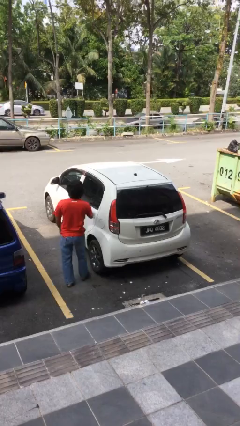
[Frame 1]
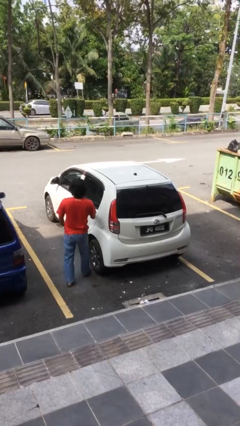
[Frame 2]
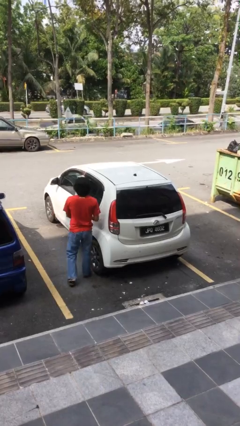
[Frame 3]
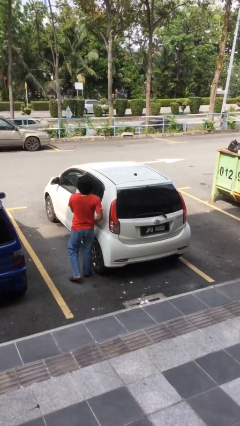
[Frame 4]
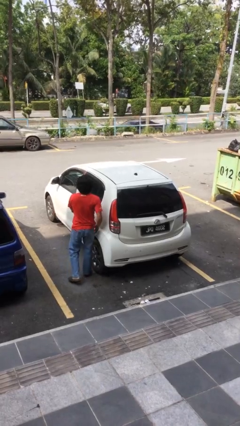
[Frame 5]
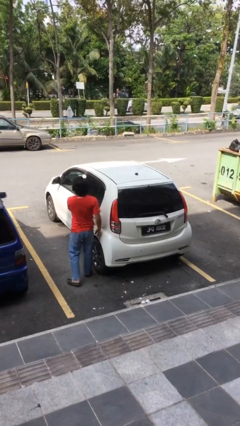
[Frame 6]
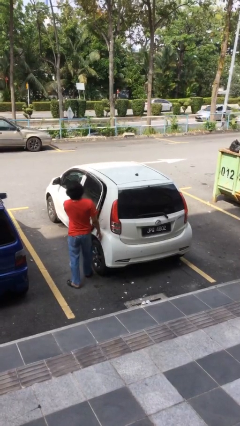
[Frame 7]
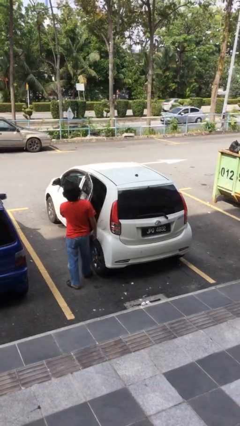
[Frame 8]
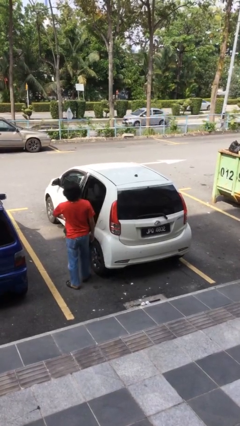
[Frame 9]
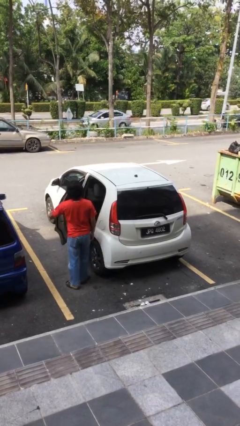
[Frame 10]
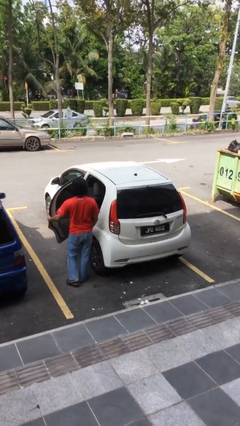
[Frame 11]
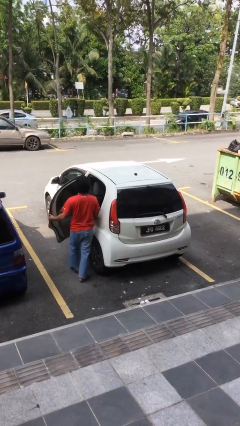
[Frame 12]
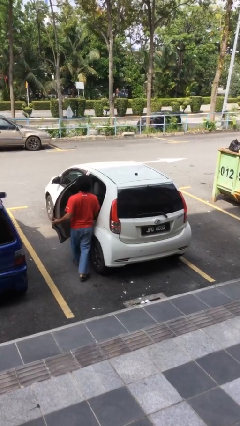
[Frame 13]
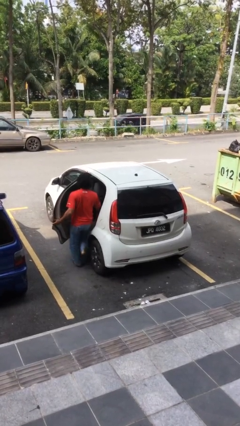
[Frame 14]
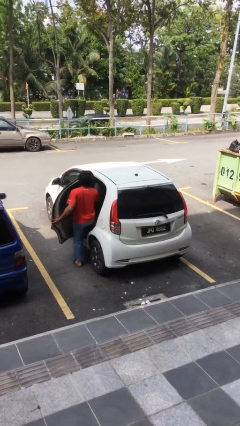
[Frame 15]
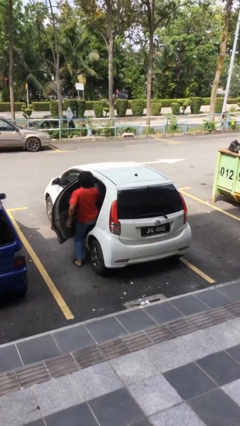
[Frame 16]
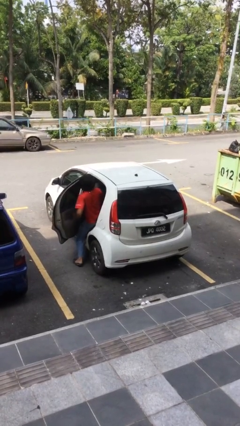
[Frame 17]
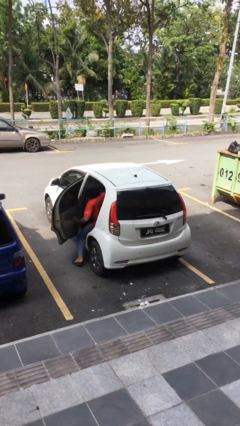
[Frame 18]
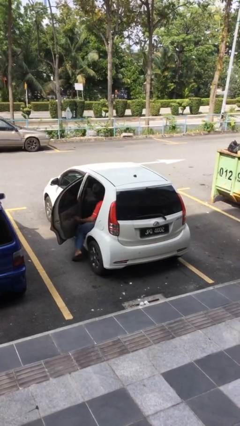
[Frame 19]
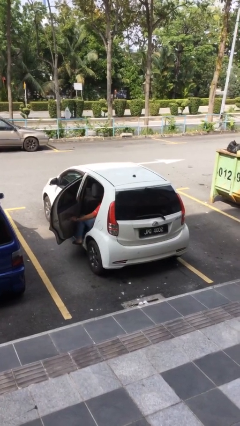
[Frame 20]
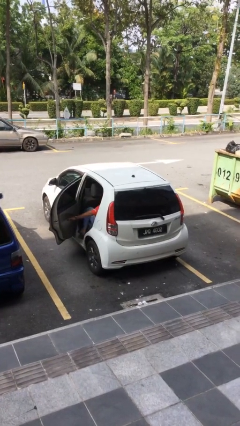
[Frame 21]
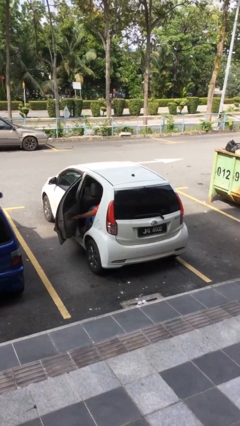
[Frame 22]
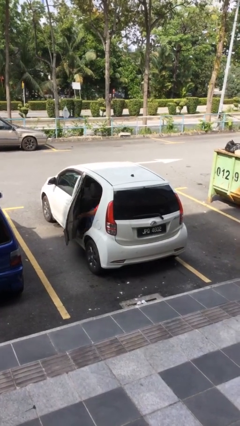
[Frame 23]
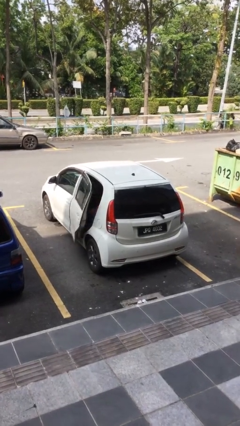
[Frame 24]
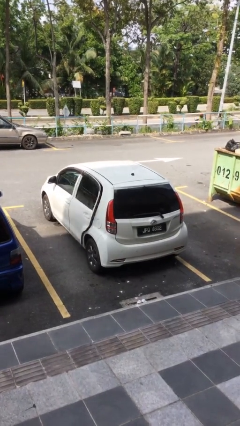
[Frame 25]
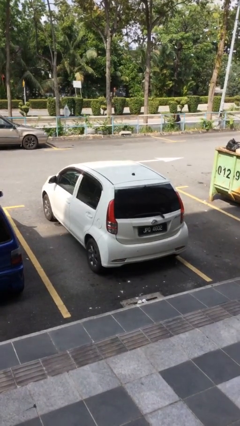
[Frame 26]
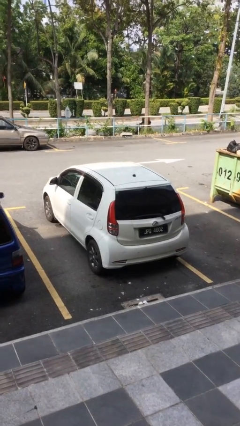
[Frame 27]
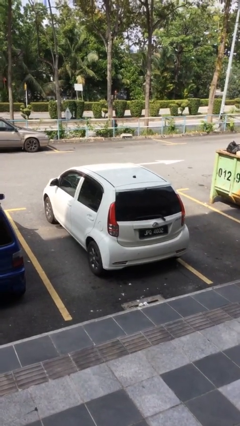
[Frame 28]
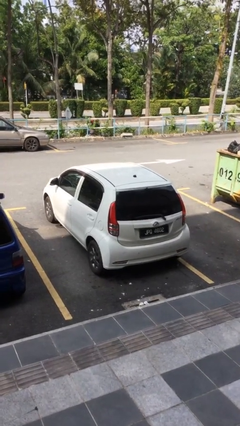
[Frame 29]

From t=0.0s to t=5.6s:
car picks up person

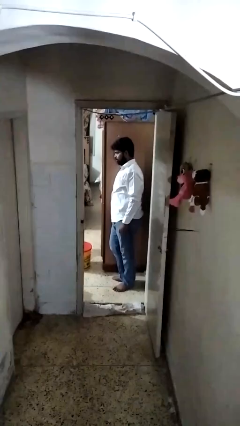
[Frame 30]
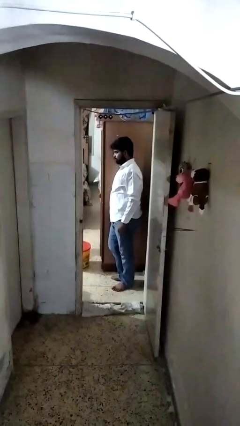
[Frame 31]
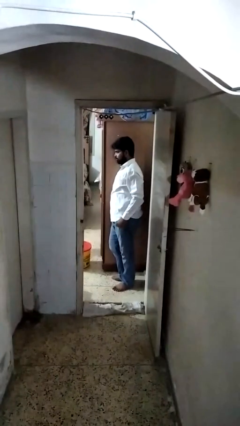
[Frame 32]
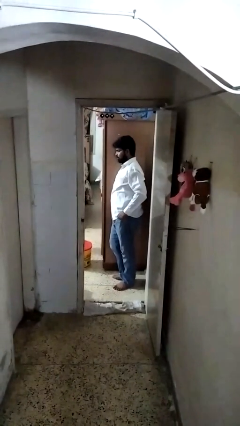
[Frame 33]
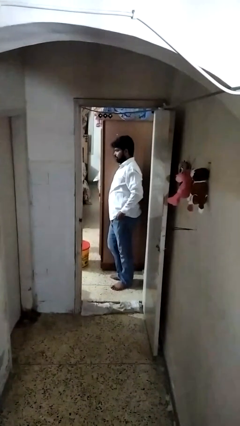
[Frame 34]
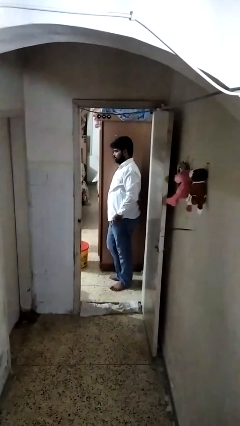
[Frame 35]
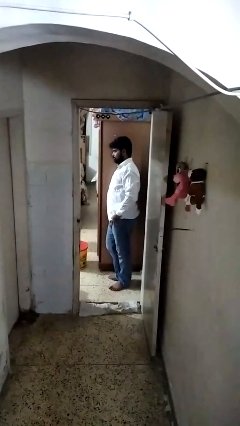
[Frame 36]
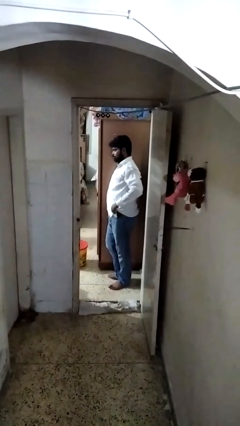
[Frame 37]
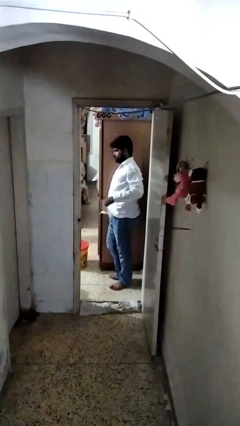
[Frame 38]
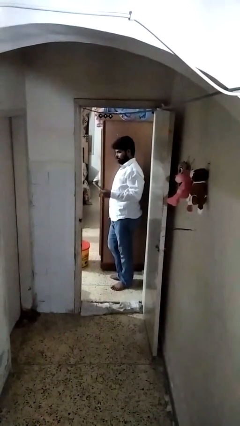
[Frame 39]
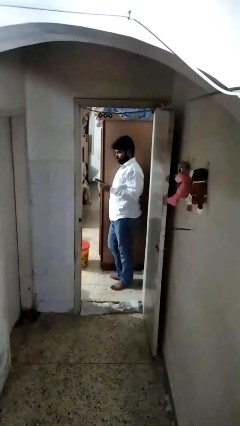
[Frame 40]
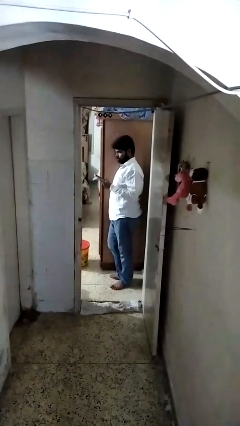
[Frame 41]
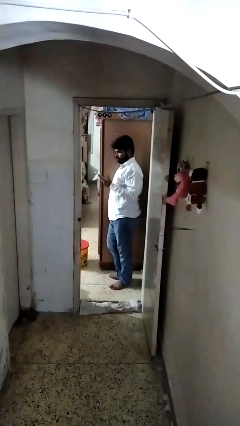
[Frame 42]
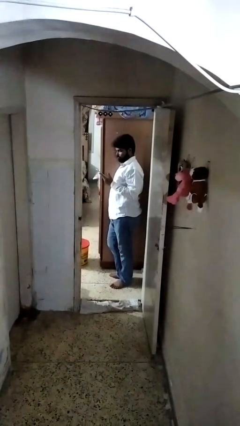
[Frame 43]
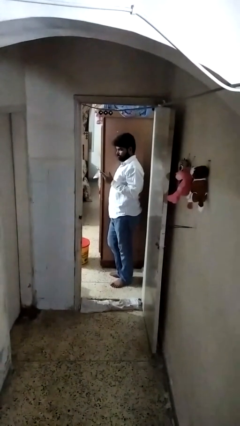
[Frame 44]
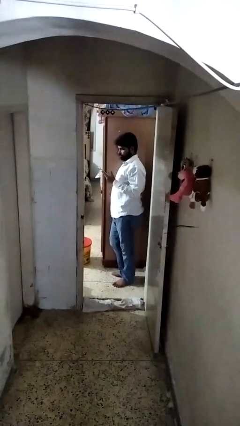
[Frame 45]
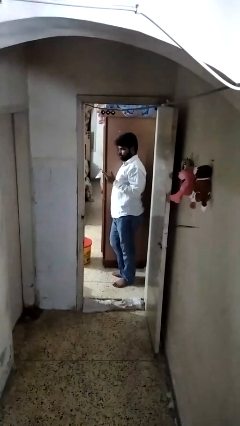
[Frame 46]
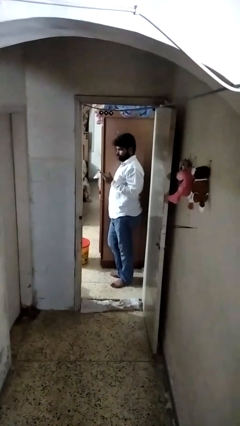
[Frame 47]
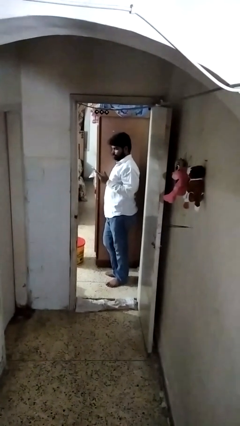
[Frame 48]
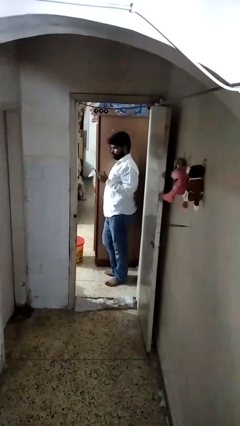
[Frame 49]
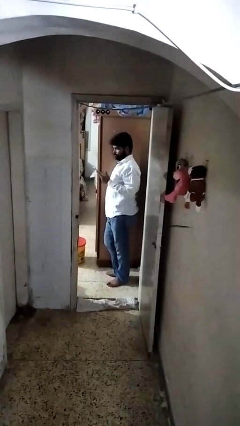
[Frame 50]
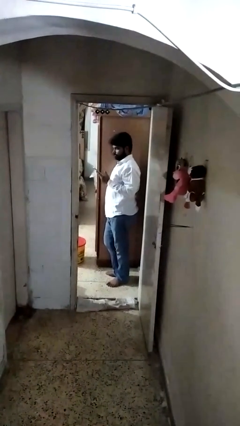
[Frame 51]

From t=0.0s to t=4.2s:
person takes phone from pocket

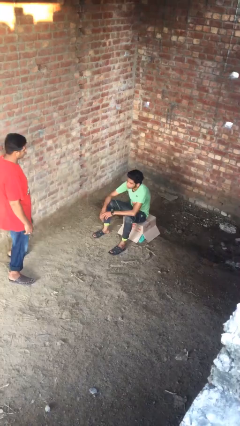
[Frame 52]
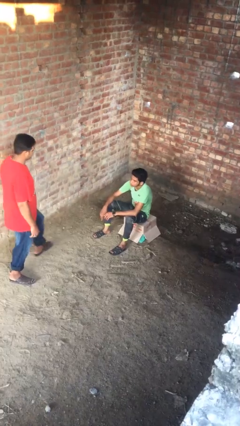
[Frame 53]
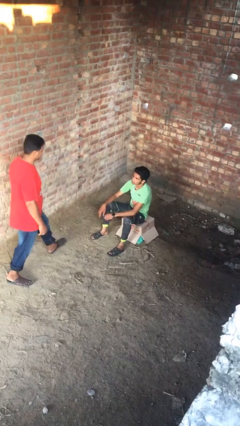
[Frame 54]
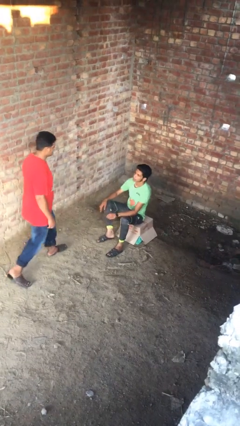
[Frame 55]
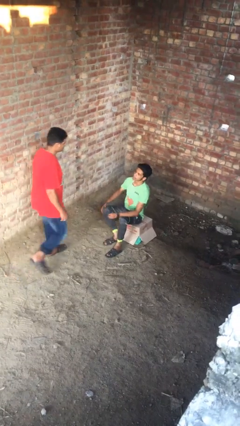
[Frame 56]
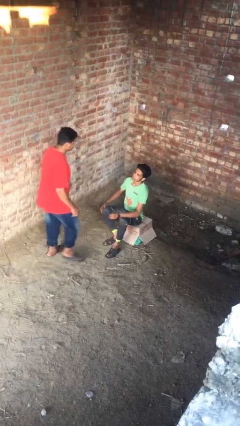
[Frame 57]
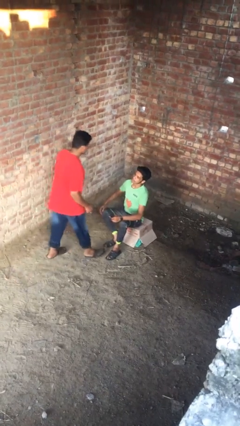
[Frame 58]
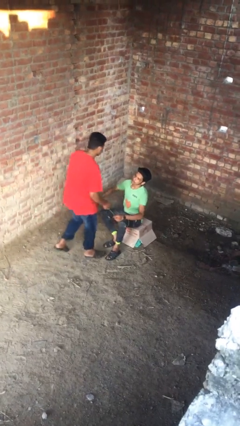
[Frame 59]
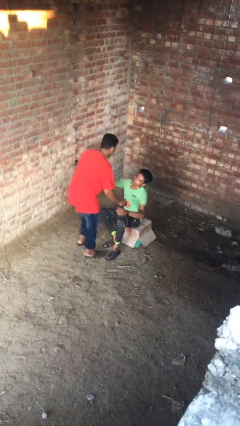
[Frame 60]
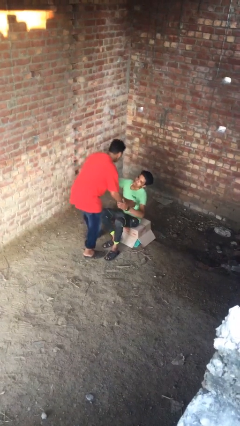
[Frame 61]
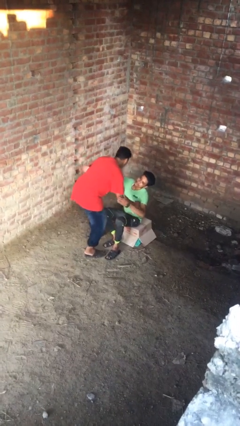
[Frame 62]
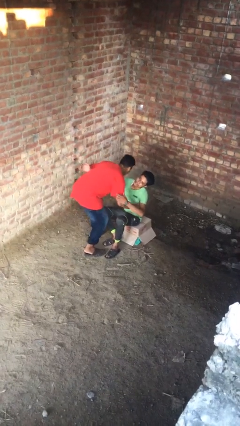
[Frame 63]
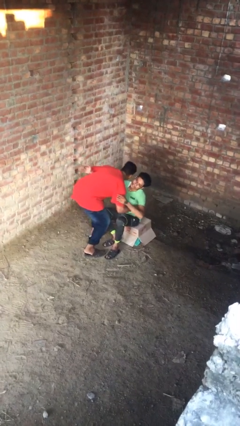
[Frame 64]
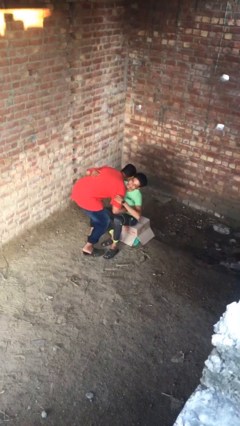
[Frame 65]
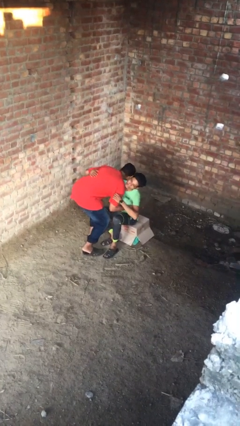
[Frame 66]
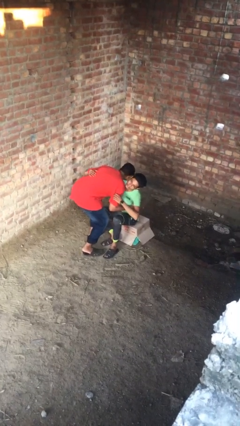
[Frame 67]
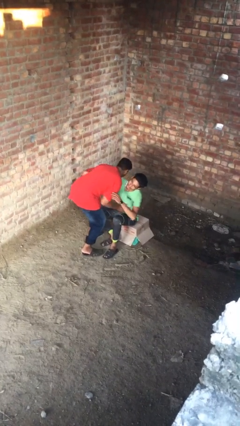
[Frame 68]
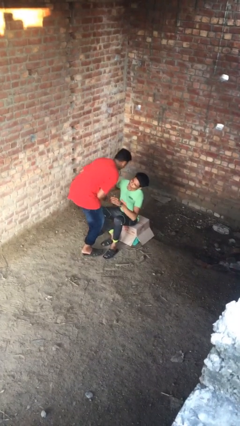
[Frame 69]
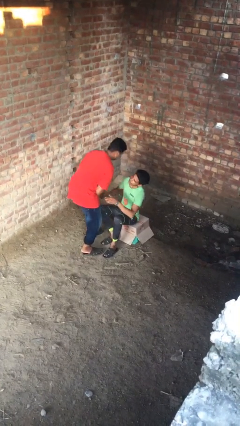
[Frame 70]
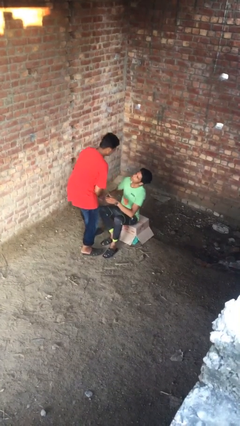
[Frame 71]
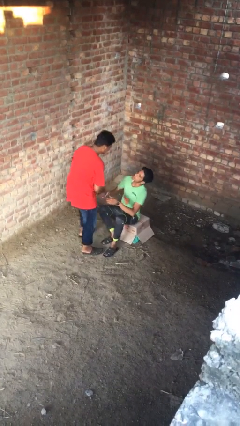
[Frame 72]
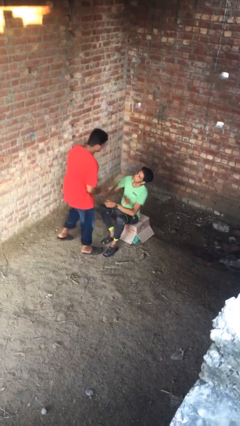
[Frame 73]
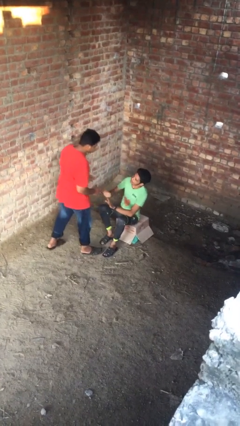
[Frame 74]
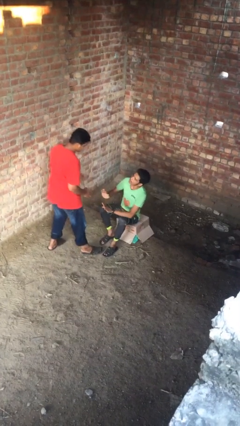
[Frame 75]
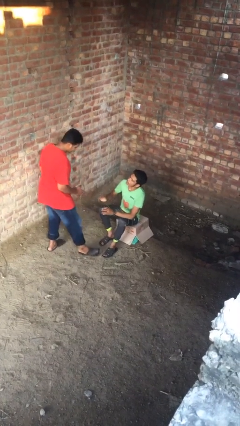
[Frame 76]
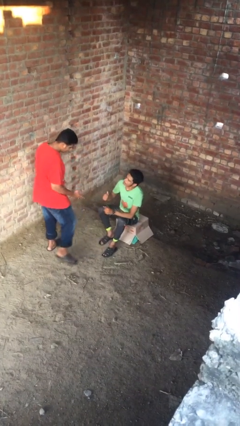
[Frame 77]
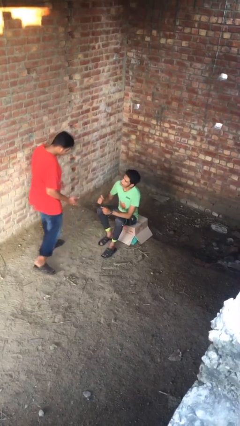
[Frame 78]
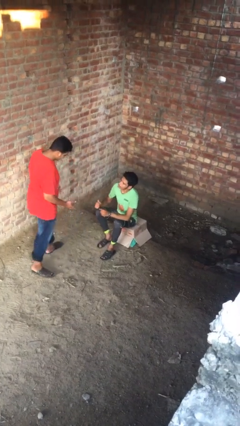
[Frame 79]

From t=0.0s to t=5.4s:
person embraces person

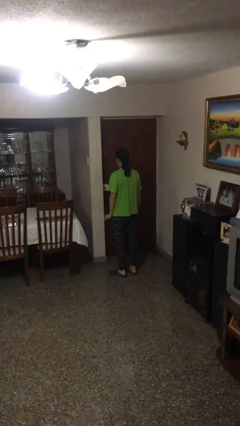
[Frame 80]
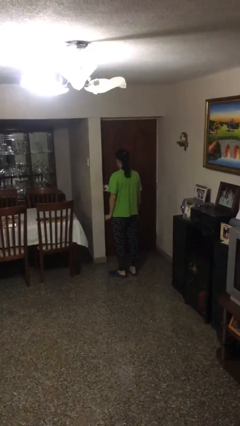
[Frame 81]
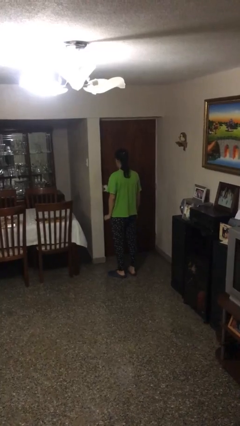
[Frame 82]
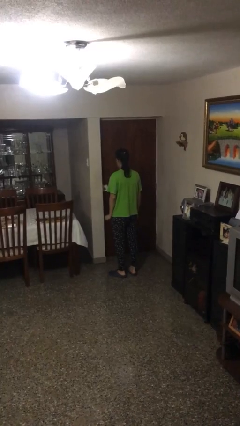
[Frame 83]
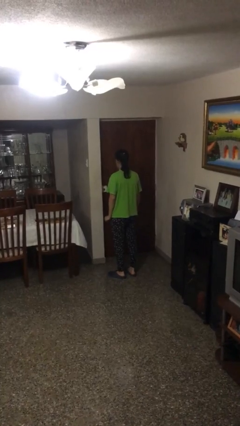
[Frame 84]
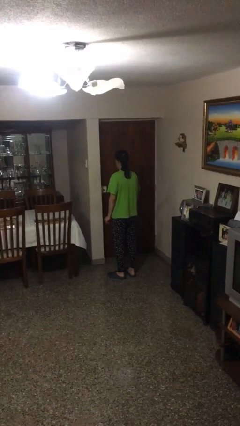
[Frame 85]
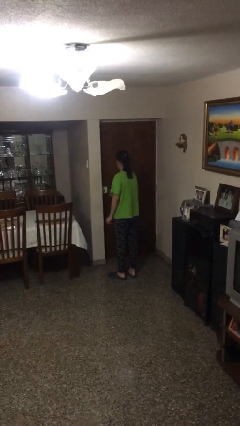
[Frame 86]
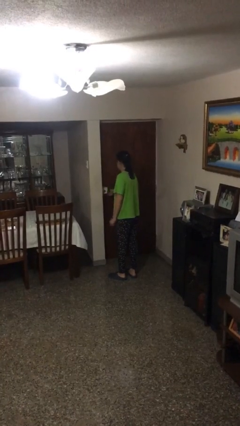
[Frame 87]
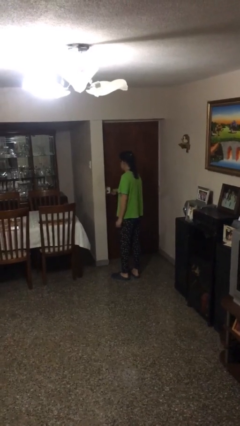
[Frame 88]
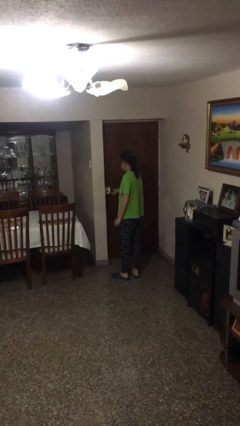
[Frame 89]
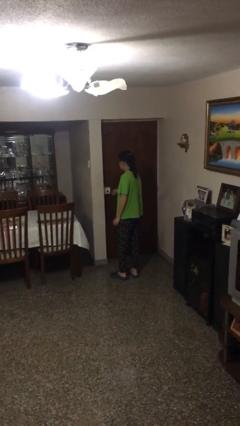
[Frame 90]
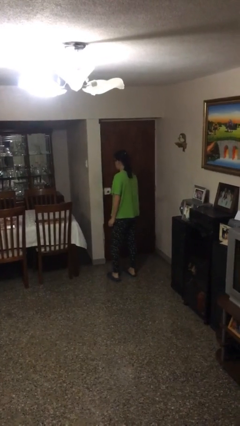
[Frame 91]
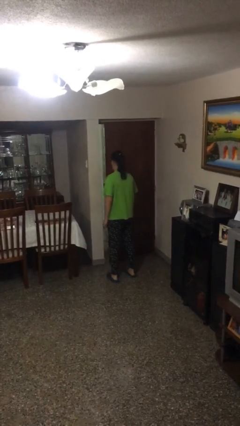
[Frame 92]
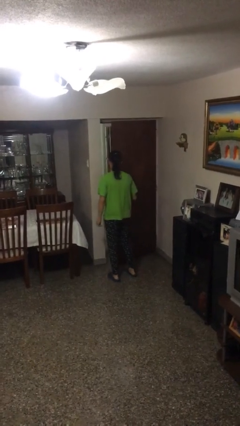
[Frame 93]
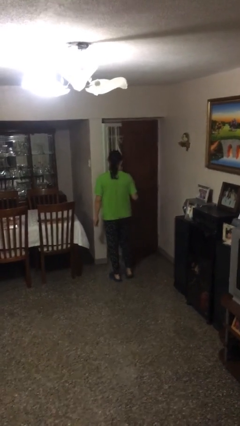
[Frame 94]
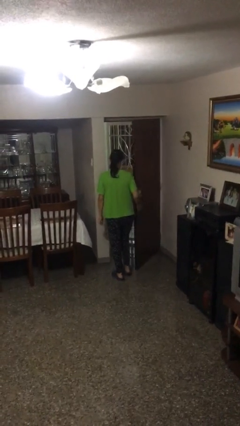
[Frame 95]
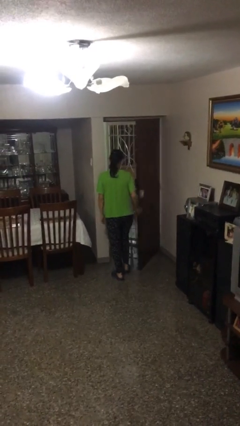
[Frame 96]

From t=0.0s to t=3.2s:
person opens facility door
